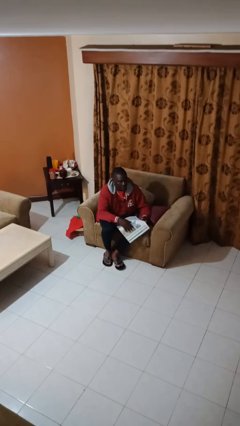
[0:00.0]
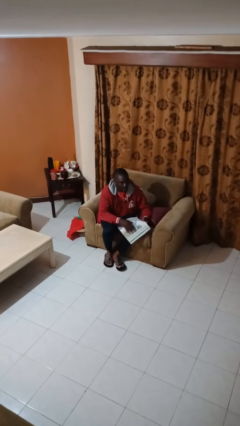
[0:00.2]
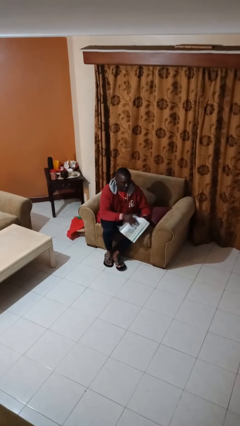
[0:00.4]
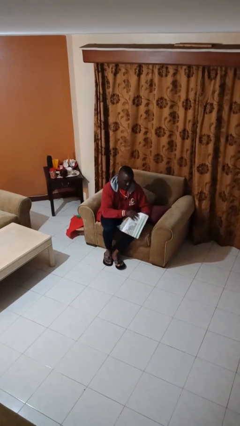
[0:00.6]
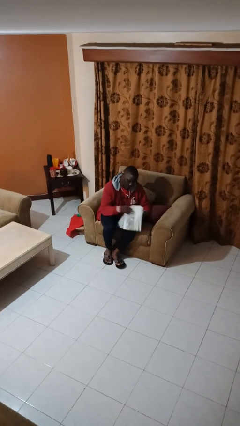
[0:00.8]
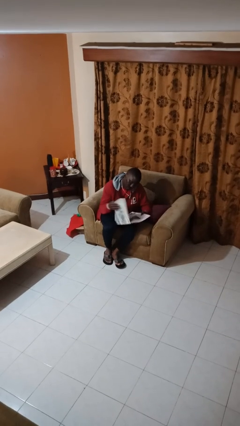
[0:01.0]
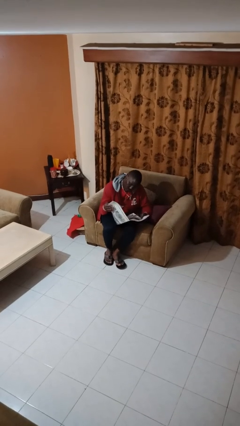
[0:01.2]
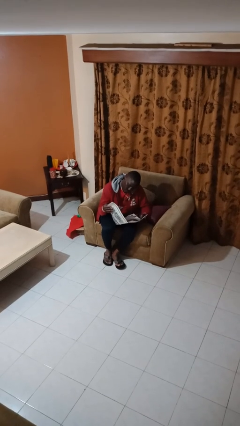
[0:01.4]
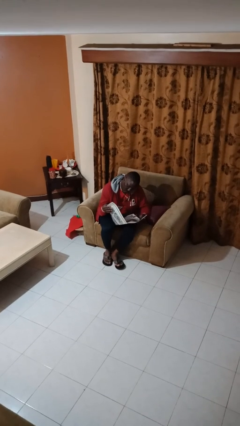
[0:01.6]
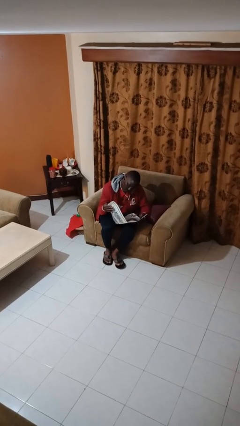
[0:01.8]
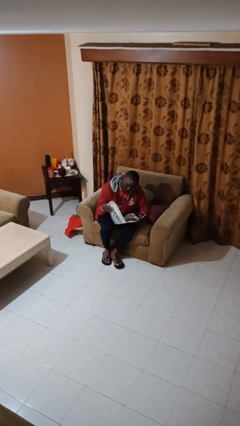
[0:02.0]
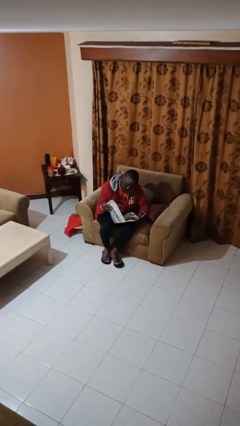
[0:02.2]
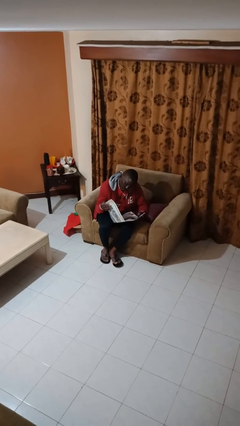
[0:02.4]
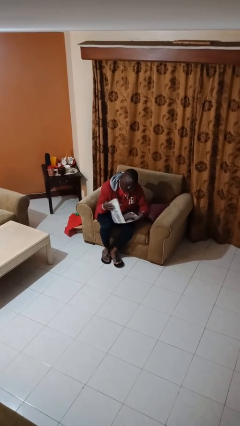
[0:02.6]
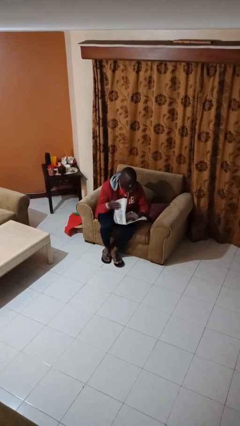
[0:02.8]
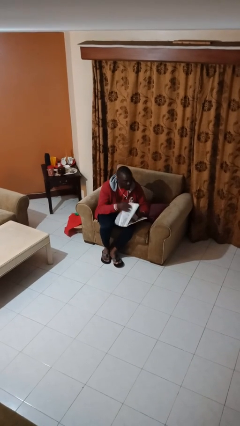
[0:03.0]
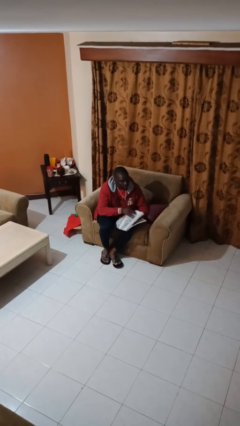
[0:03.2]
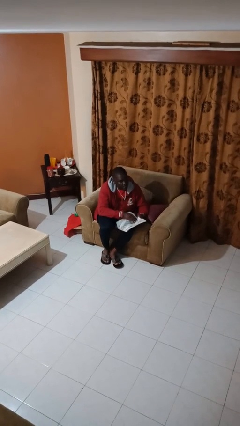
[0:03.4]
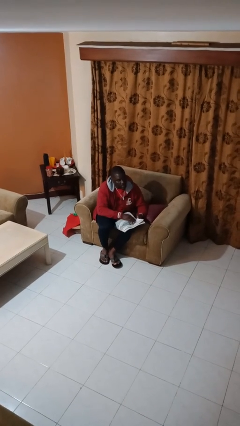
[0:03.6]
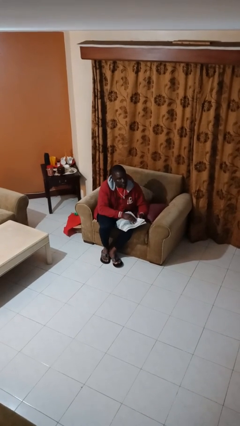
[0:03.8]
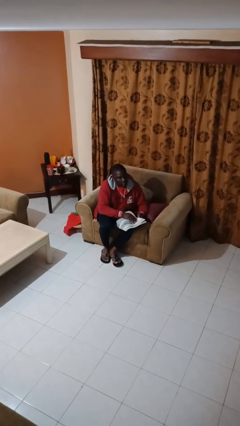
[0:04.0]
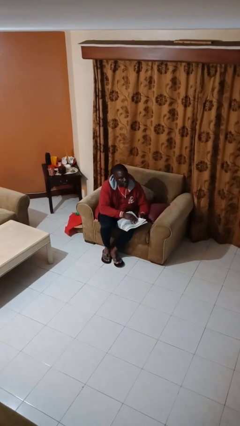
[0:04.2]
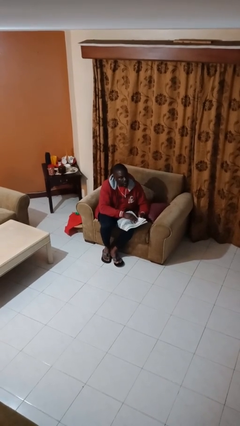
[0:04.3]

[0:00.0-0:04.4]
person reads newspaper

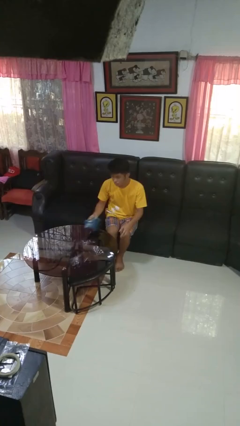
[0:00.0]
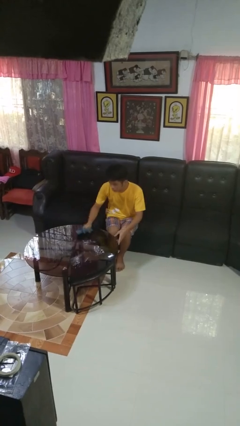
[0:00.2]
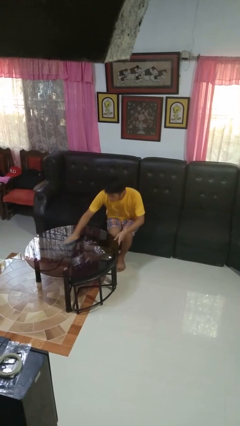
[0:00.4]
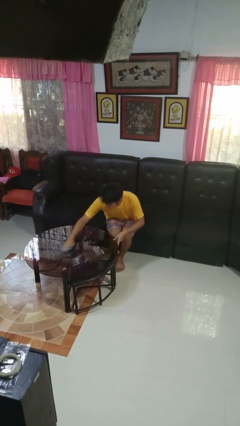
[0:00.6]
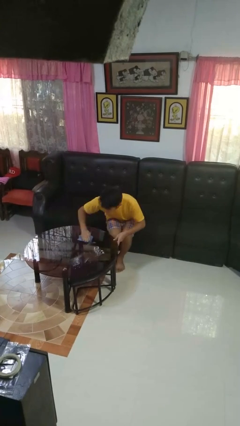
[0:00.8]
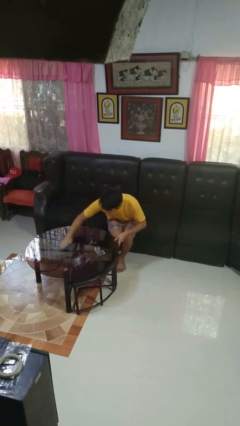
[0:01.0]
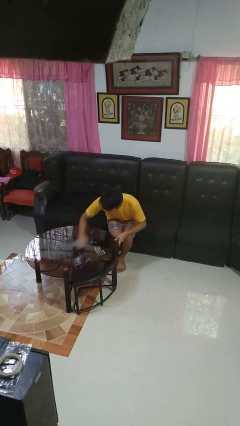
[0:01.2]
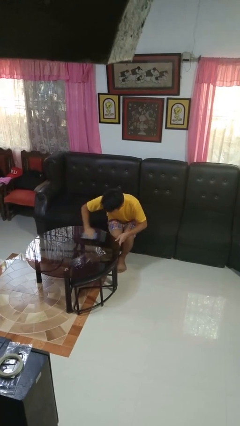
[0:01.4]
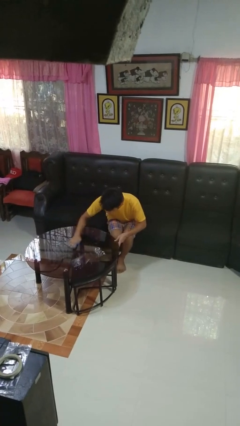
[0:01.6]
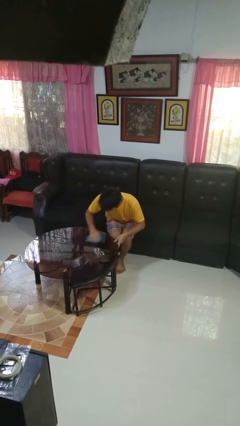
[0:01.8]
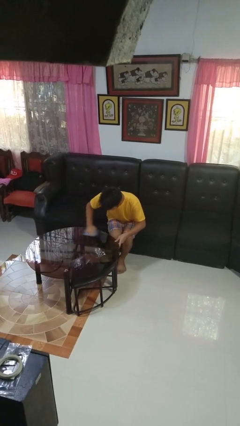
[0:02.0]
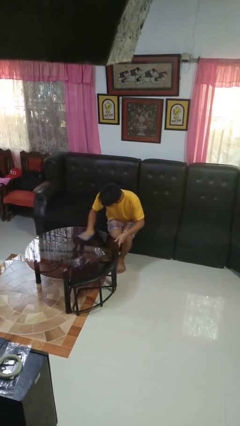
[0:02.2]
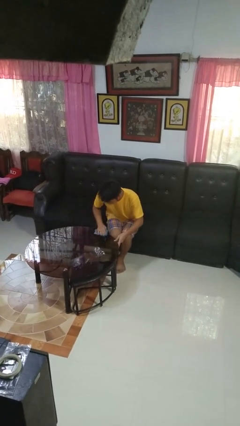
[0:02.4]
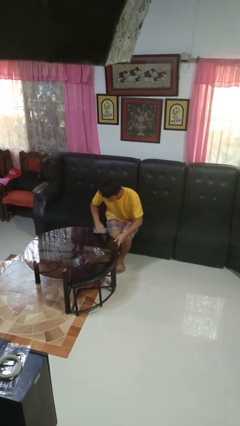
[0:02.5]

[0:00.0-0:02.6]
person cleans table with rag

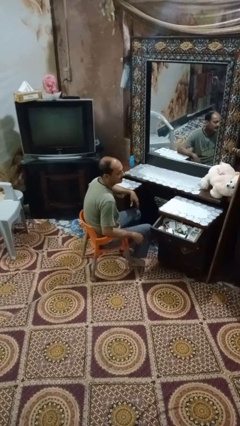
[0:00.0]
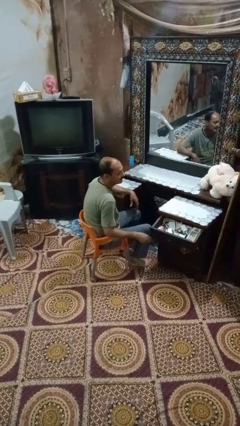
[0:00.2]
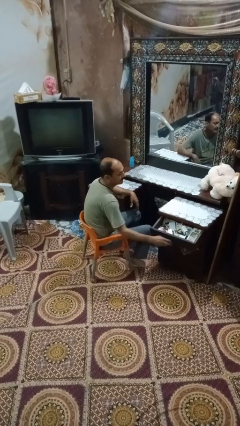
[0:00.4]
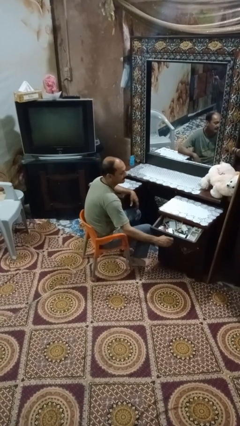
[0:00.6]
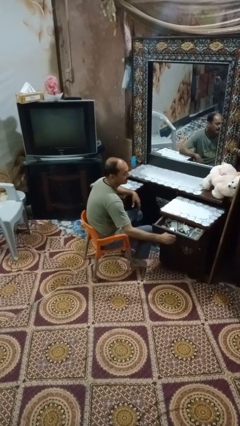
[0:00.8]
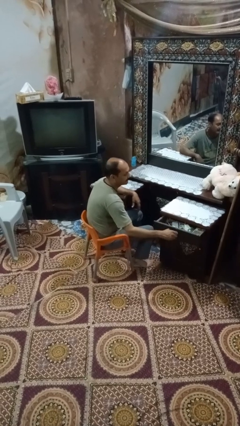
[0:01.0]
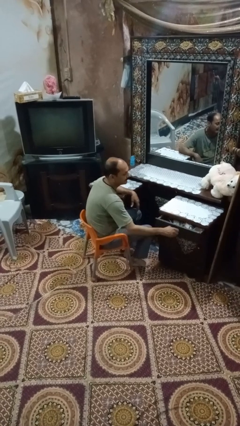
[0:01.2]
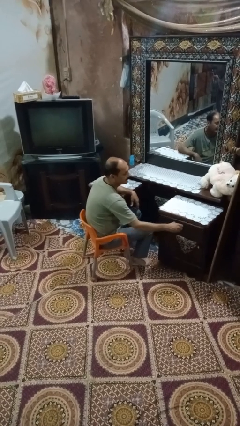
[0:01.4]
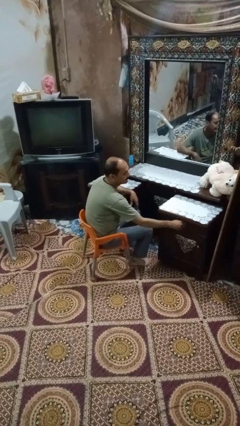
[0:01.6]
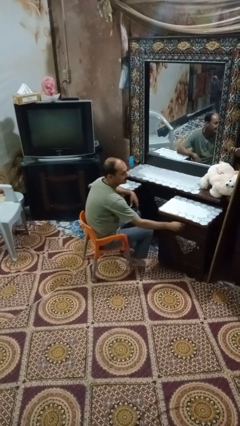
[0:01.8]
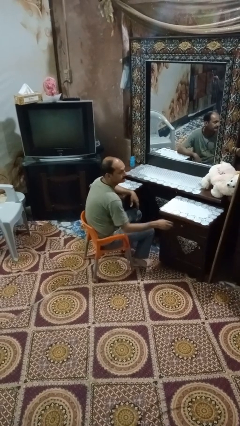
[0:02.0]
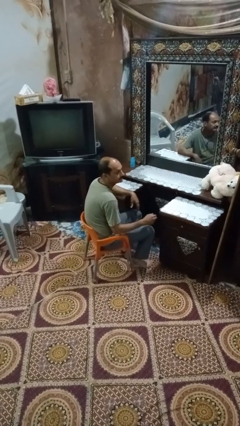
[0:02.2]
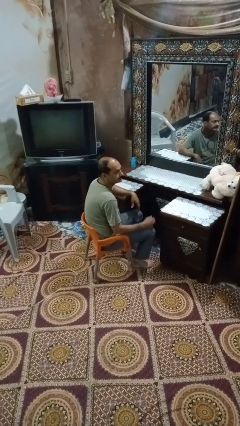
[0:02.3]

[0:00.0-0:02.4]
person closes dresser drawer

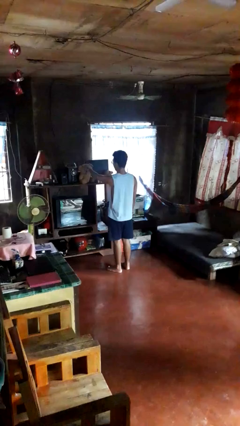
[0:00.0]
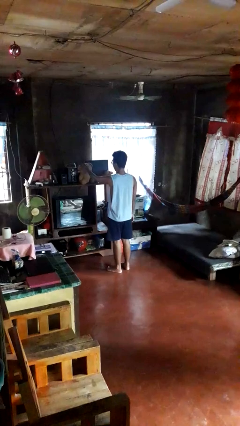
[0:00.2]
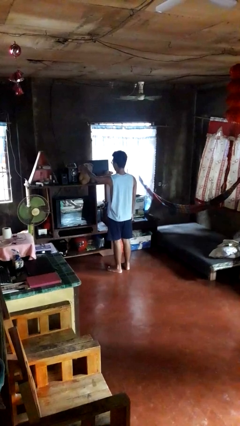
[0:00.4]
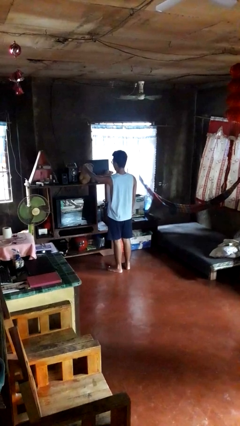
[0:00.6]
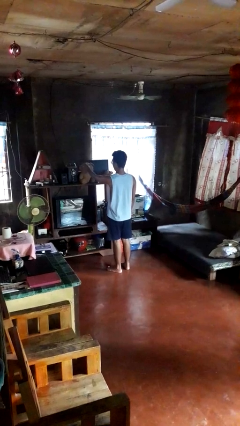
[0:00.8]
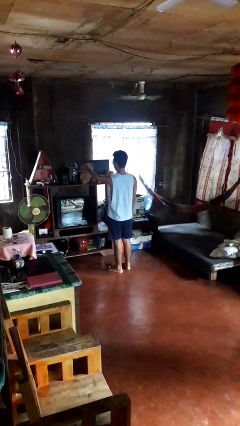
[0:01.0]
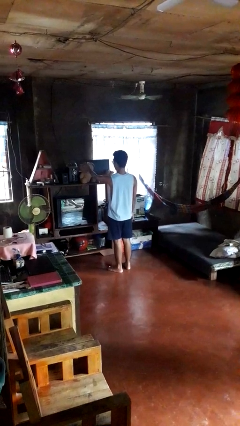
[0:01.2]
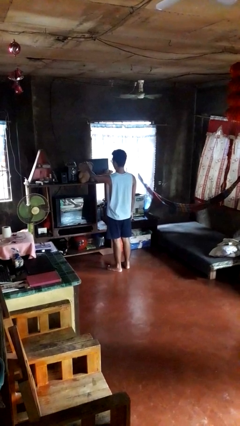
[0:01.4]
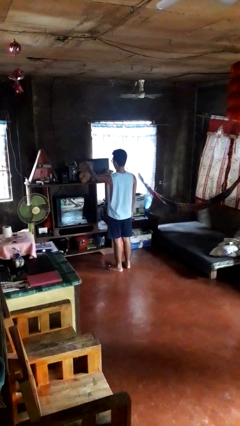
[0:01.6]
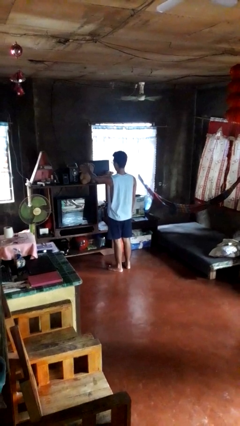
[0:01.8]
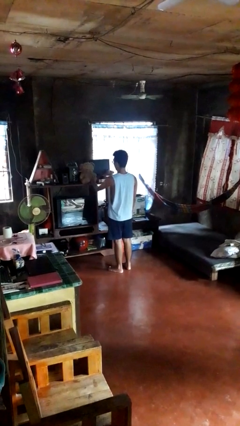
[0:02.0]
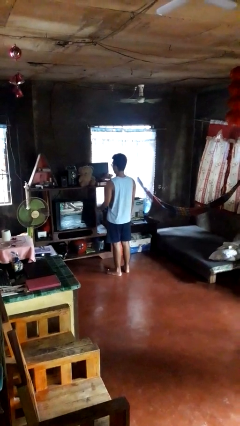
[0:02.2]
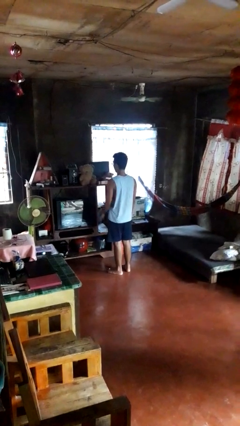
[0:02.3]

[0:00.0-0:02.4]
person taps object with finger

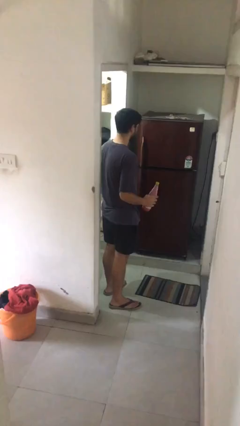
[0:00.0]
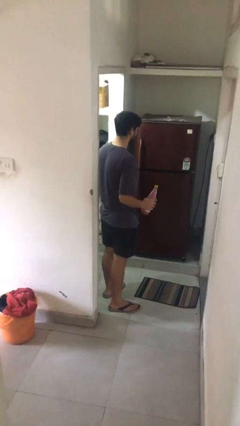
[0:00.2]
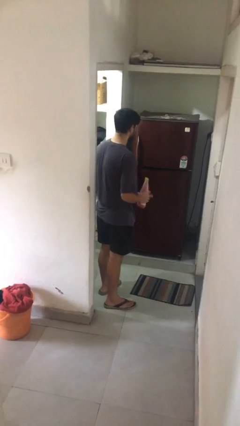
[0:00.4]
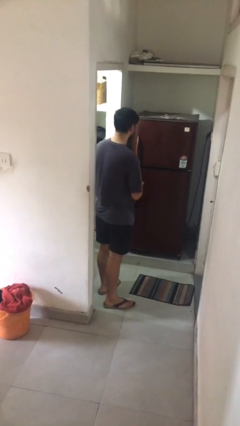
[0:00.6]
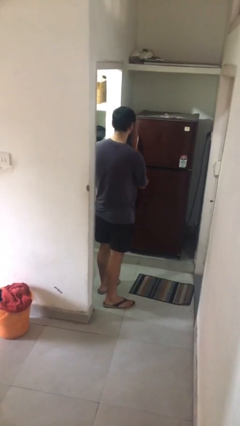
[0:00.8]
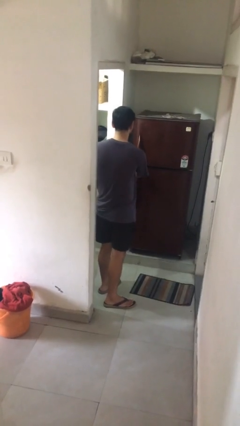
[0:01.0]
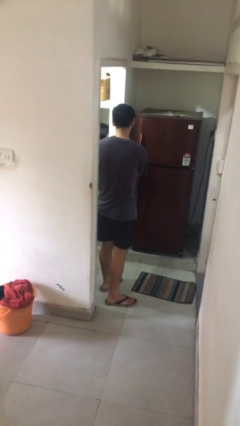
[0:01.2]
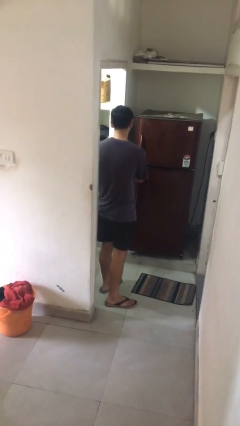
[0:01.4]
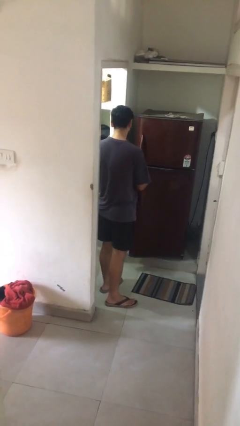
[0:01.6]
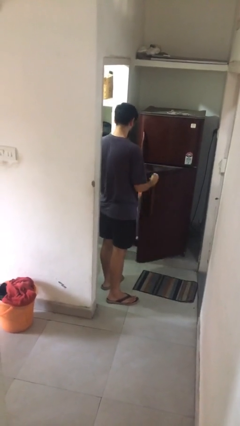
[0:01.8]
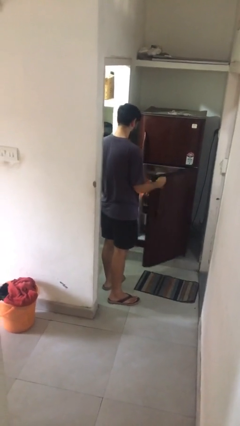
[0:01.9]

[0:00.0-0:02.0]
person opens refrigerator

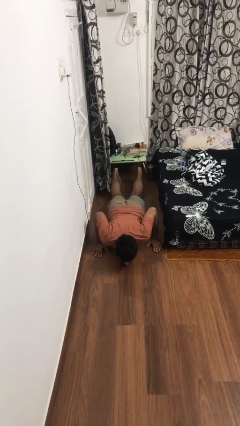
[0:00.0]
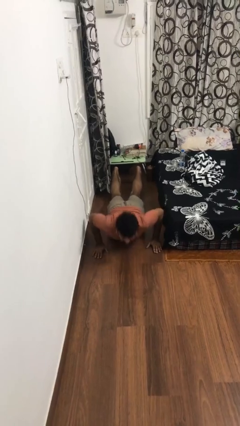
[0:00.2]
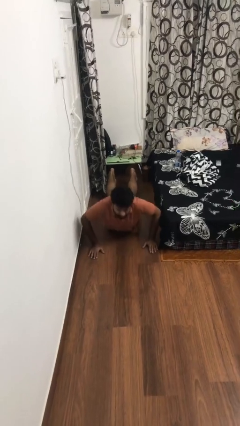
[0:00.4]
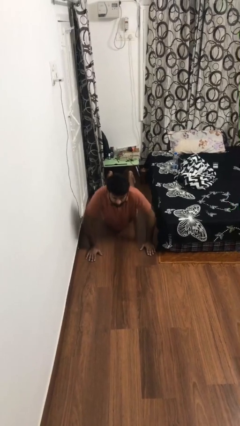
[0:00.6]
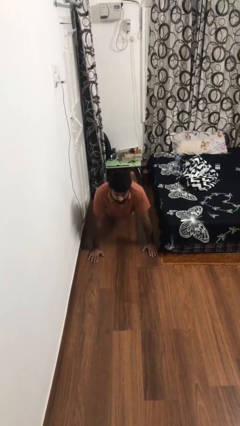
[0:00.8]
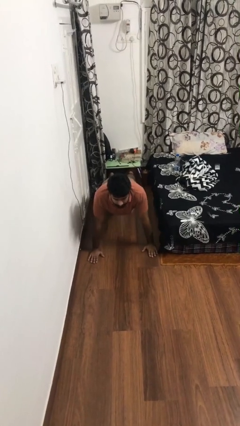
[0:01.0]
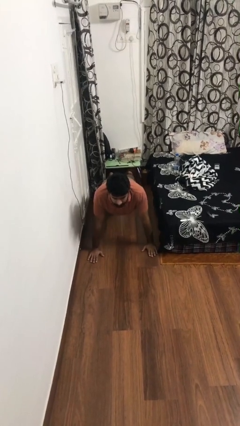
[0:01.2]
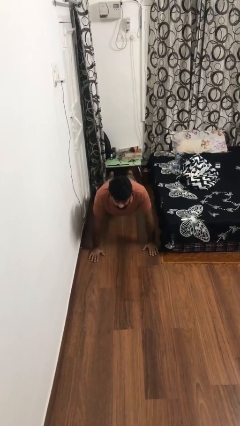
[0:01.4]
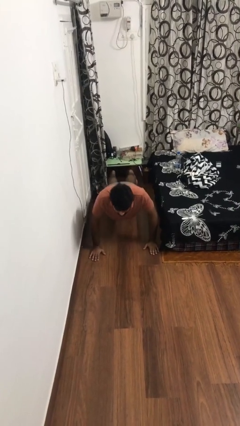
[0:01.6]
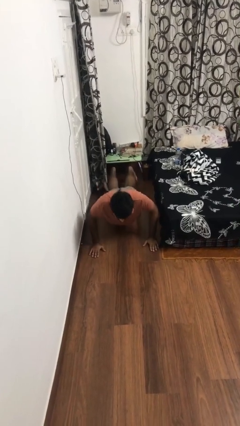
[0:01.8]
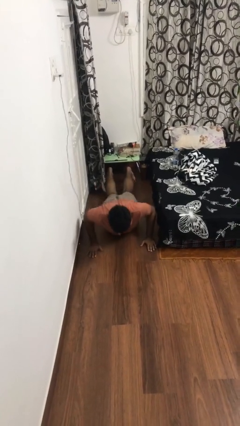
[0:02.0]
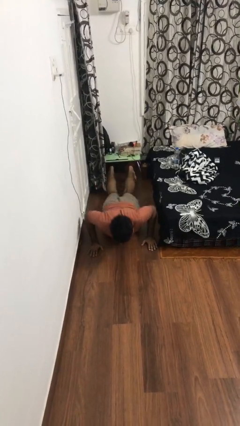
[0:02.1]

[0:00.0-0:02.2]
person exercises with pushup

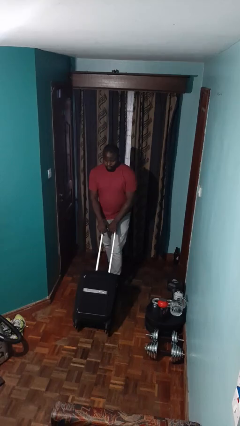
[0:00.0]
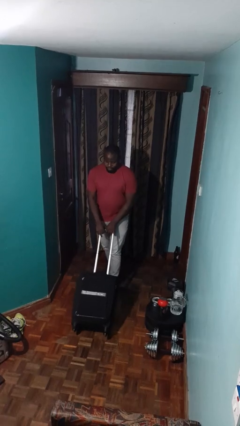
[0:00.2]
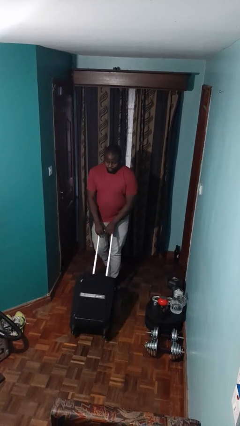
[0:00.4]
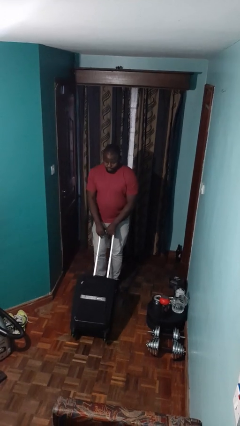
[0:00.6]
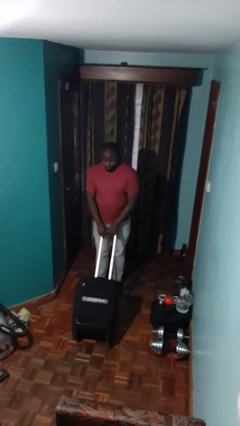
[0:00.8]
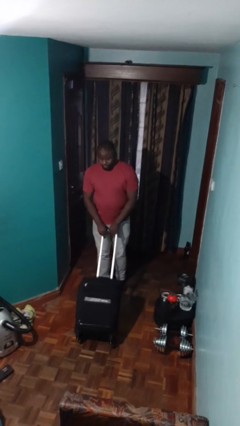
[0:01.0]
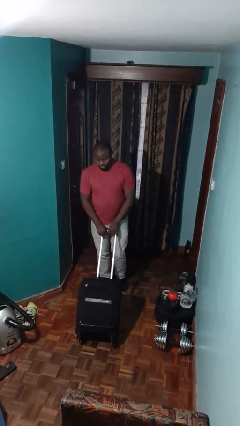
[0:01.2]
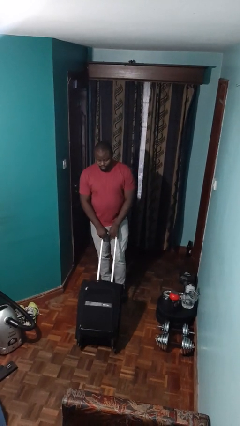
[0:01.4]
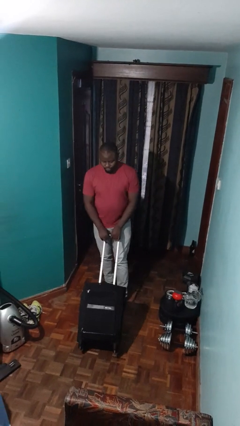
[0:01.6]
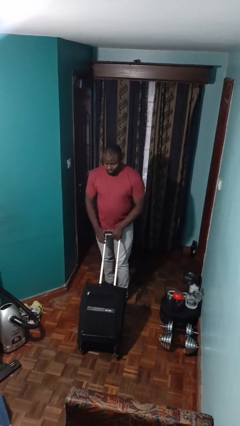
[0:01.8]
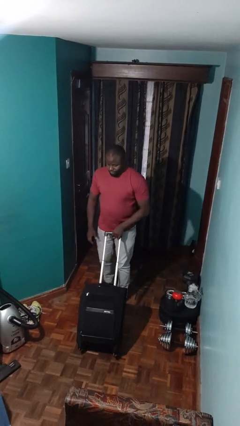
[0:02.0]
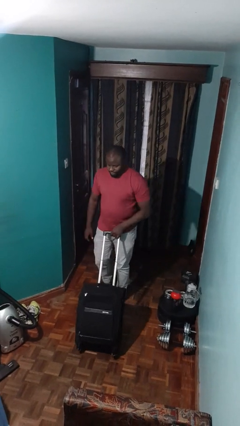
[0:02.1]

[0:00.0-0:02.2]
person pushes wheeled cart
